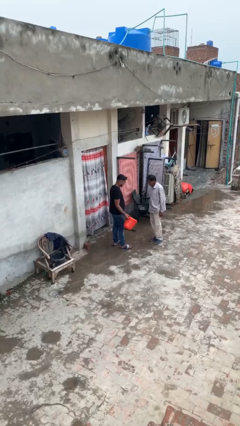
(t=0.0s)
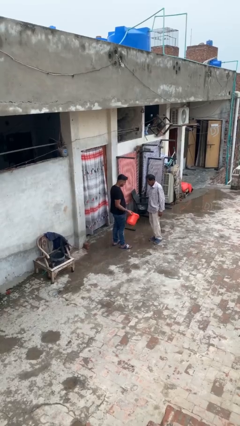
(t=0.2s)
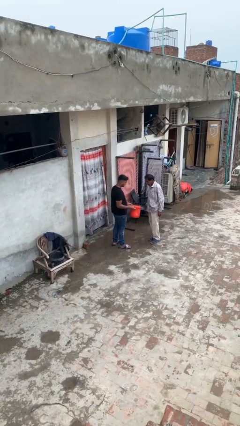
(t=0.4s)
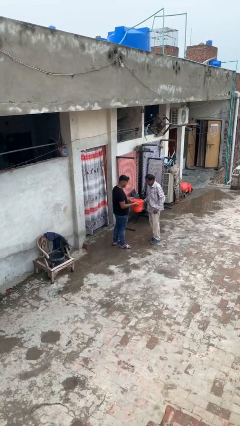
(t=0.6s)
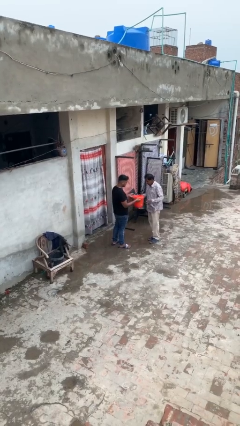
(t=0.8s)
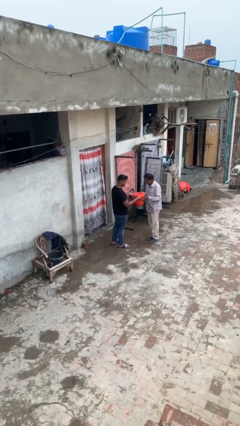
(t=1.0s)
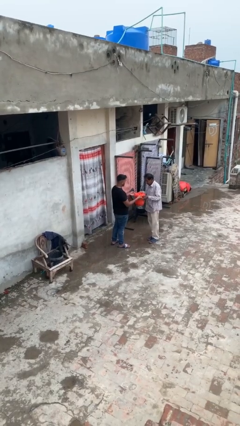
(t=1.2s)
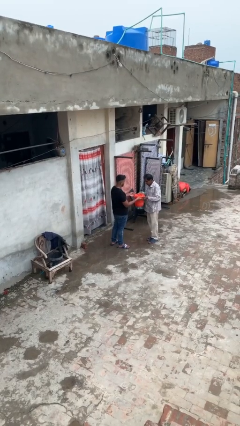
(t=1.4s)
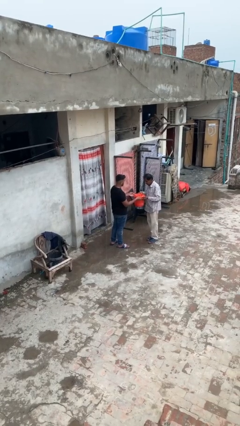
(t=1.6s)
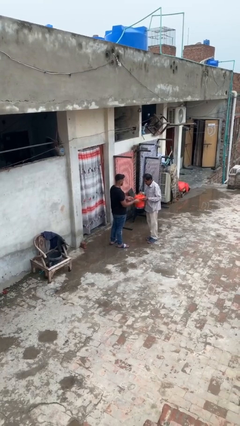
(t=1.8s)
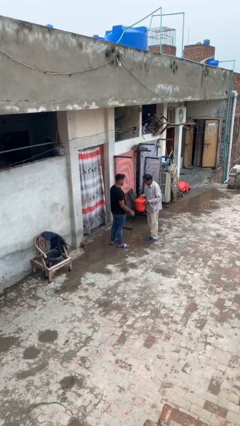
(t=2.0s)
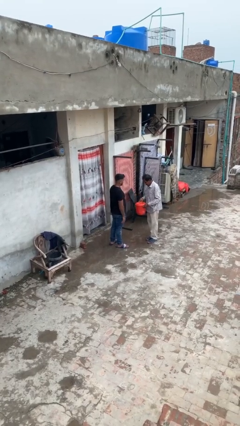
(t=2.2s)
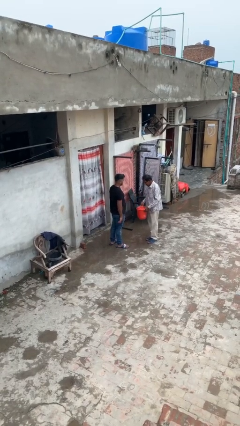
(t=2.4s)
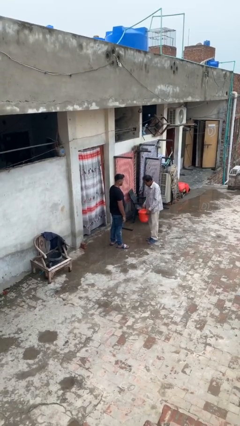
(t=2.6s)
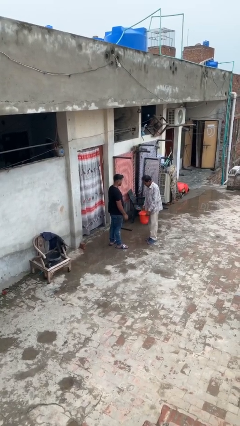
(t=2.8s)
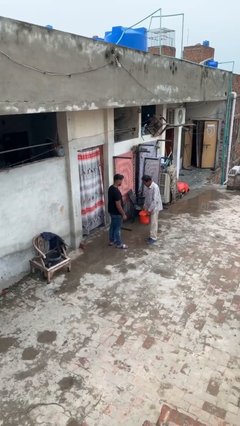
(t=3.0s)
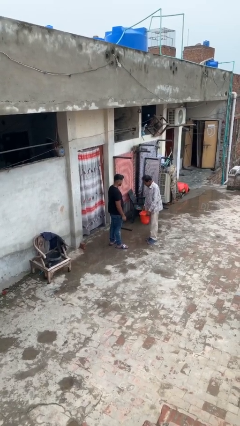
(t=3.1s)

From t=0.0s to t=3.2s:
person transfers object to person

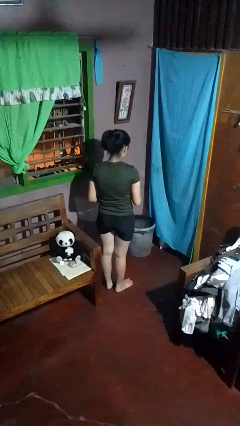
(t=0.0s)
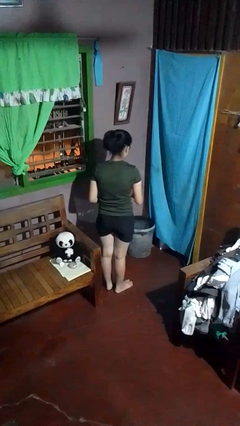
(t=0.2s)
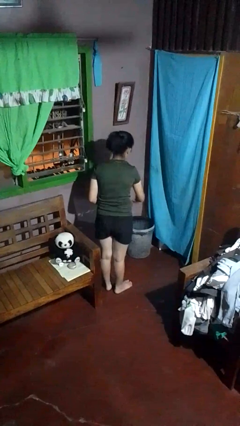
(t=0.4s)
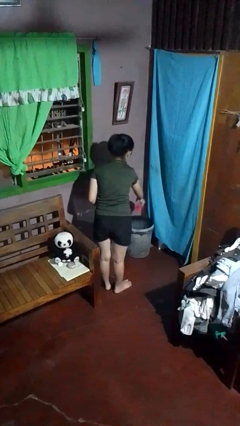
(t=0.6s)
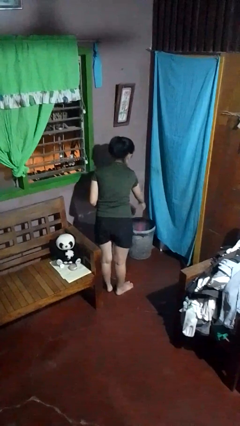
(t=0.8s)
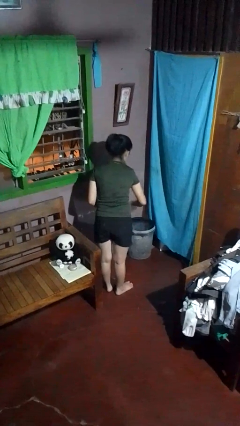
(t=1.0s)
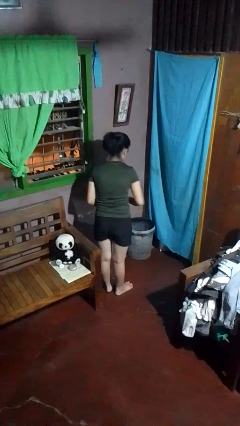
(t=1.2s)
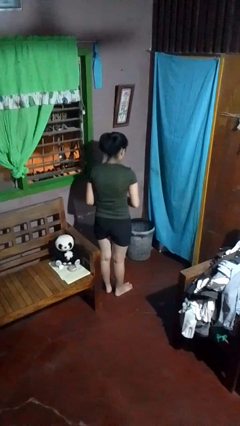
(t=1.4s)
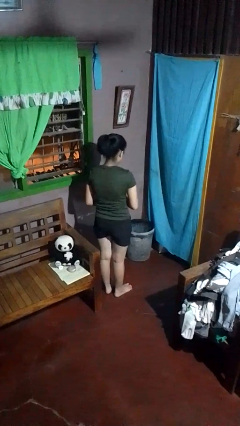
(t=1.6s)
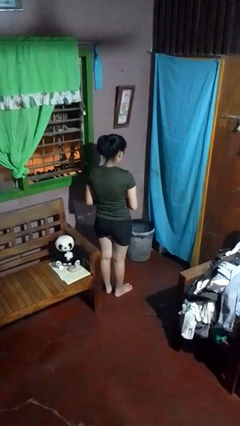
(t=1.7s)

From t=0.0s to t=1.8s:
person discards trash

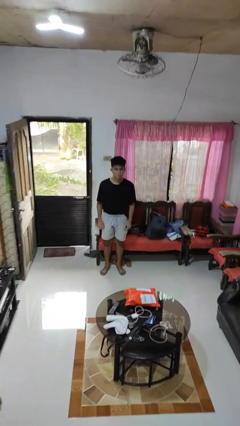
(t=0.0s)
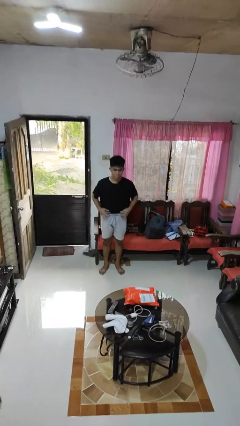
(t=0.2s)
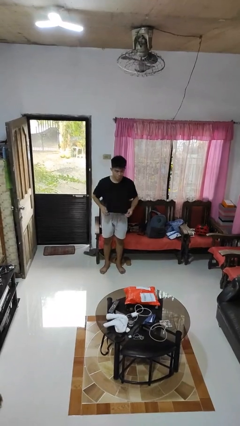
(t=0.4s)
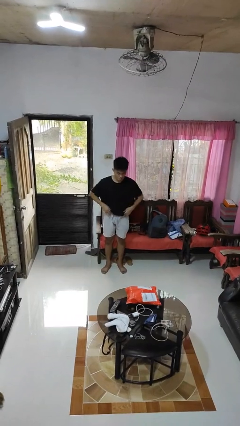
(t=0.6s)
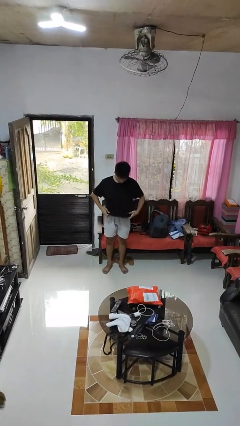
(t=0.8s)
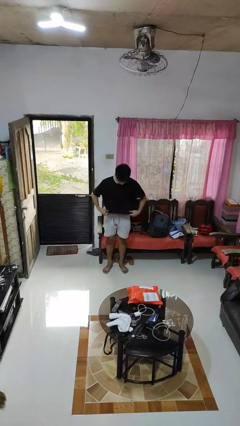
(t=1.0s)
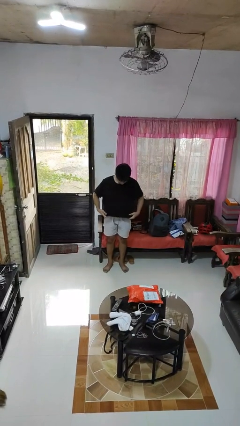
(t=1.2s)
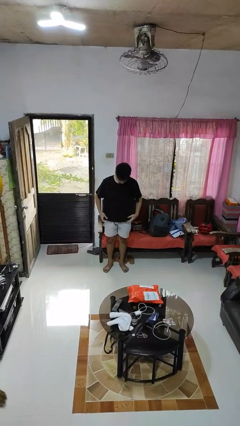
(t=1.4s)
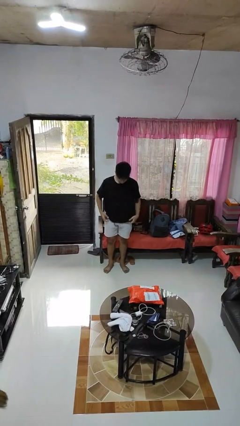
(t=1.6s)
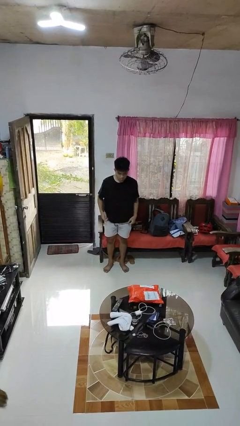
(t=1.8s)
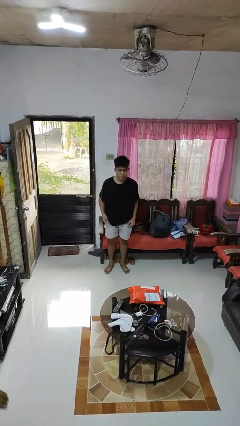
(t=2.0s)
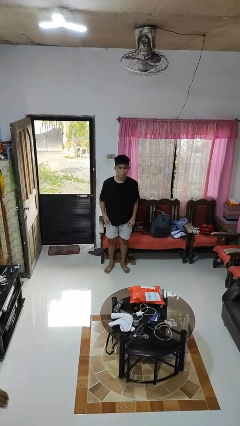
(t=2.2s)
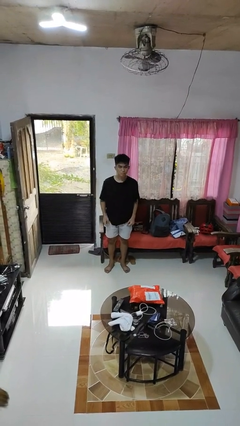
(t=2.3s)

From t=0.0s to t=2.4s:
person untucks shirt

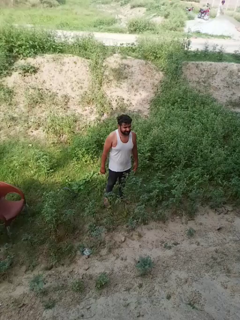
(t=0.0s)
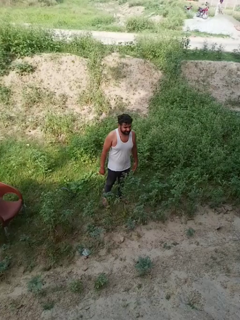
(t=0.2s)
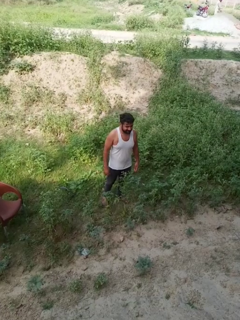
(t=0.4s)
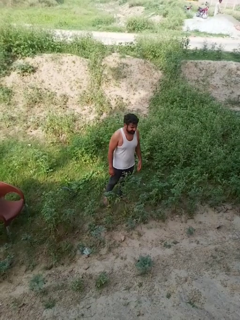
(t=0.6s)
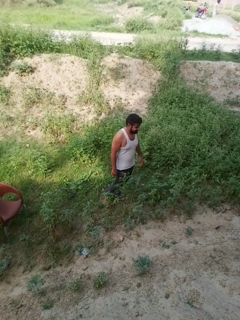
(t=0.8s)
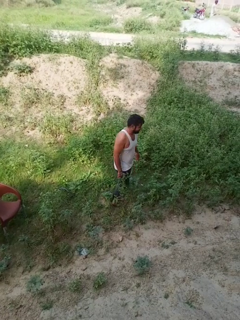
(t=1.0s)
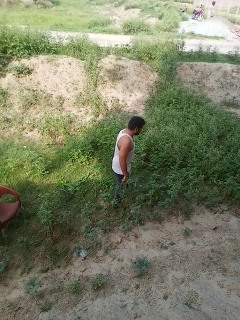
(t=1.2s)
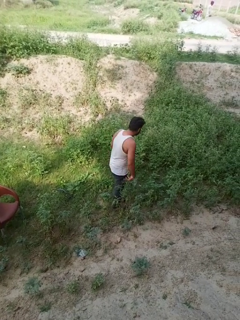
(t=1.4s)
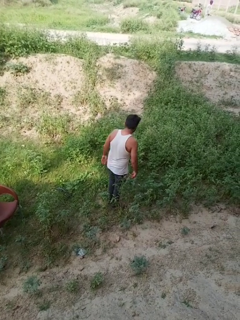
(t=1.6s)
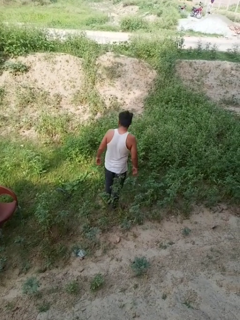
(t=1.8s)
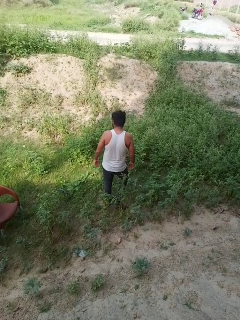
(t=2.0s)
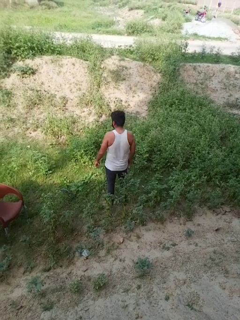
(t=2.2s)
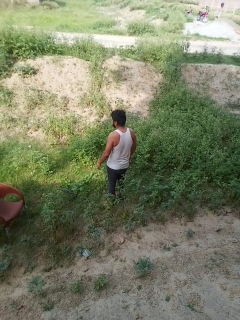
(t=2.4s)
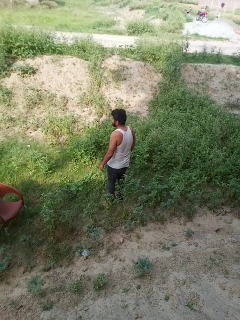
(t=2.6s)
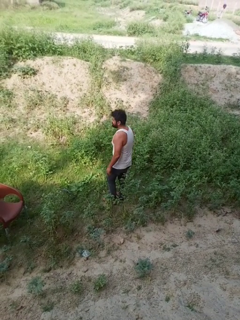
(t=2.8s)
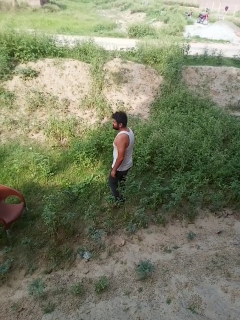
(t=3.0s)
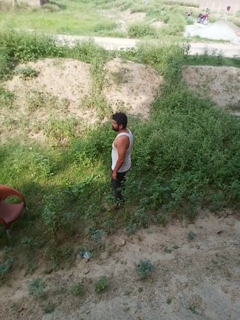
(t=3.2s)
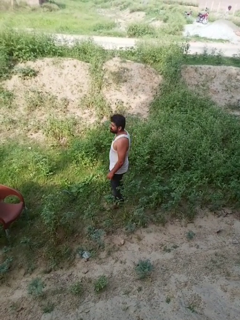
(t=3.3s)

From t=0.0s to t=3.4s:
person twirls

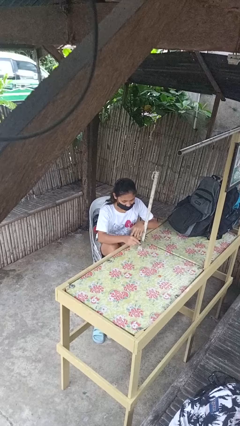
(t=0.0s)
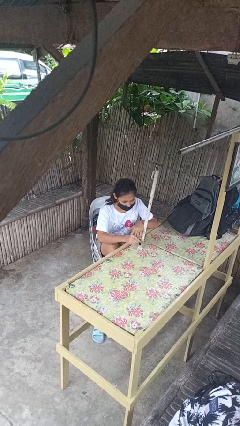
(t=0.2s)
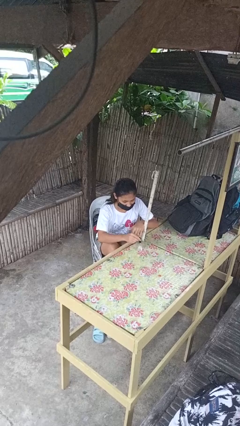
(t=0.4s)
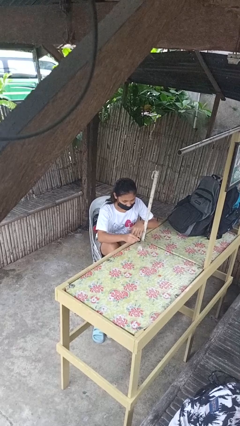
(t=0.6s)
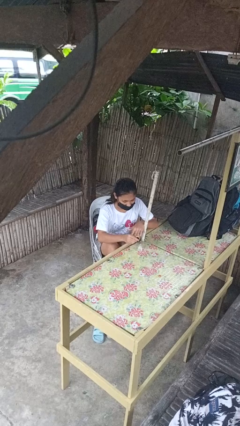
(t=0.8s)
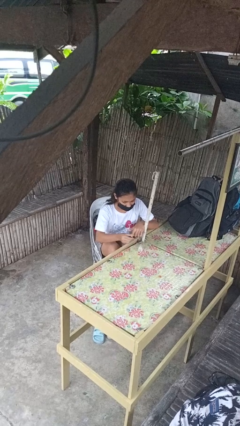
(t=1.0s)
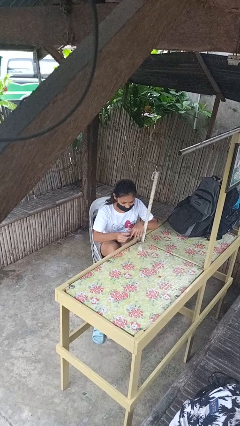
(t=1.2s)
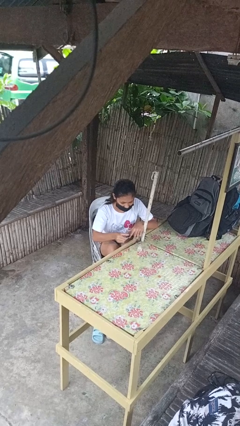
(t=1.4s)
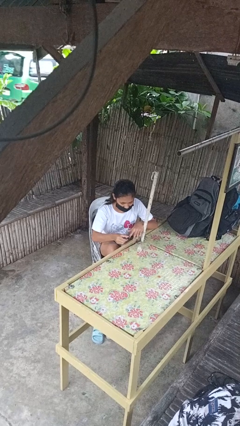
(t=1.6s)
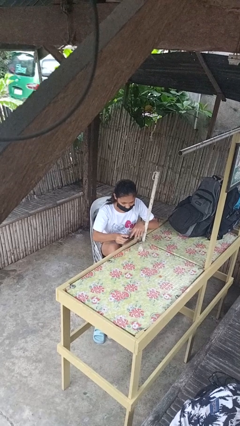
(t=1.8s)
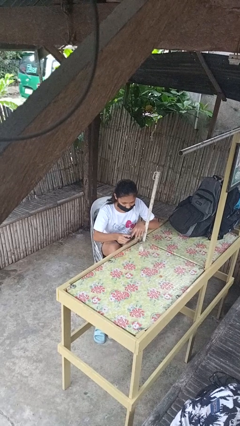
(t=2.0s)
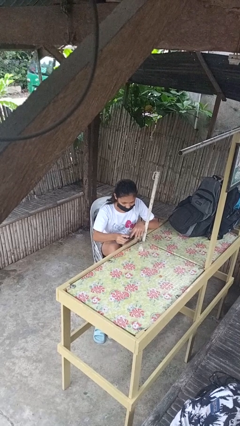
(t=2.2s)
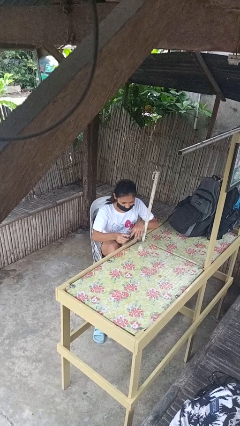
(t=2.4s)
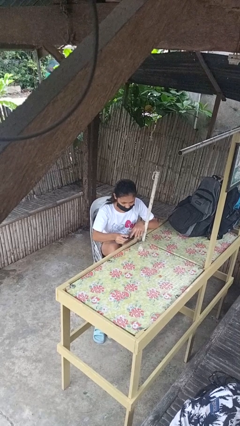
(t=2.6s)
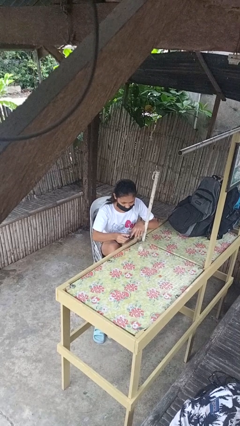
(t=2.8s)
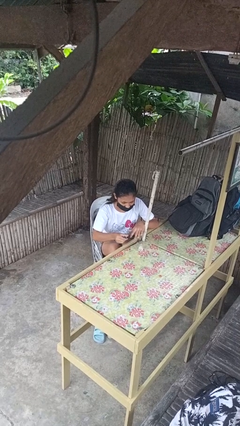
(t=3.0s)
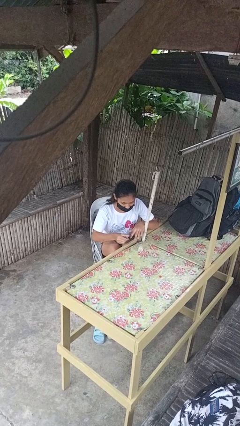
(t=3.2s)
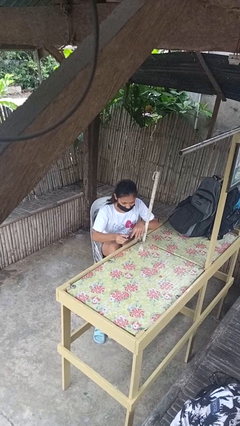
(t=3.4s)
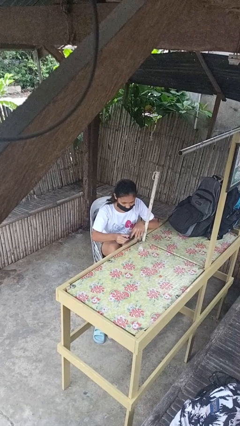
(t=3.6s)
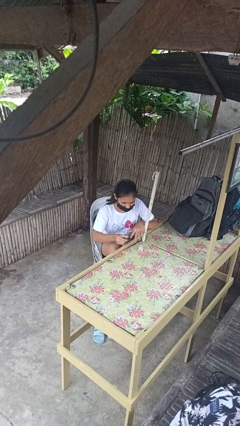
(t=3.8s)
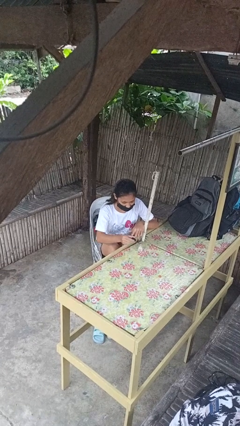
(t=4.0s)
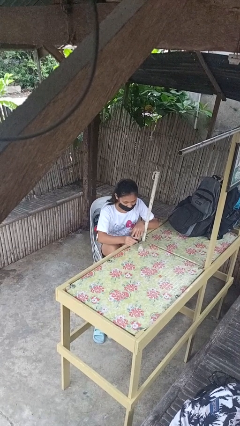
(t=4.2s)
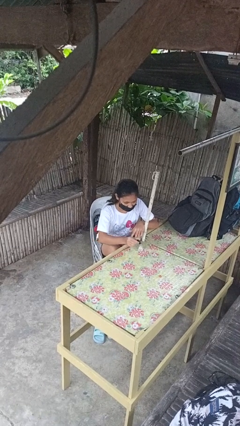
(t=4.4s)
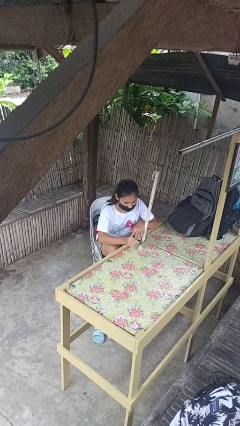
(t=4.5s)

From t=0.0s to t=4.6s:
person paints fingernails

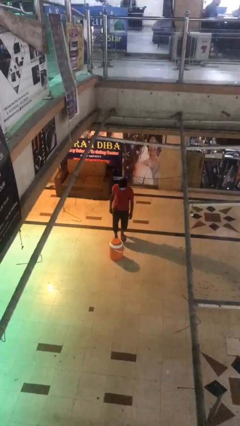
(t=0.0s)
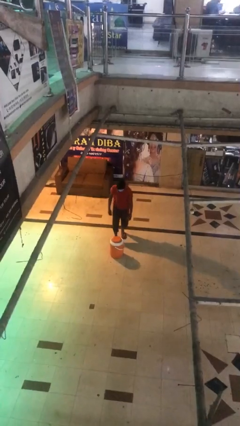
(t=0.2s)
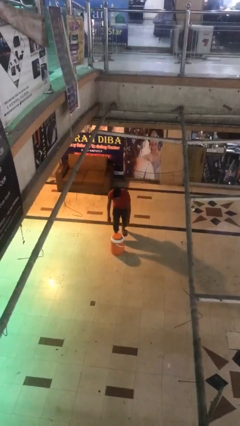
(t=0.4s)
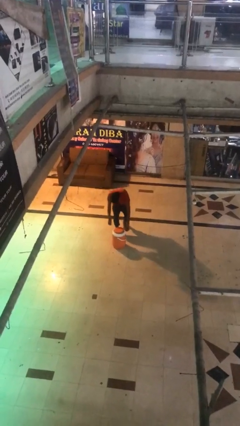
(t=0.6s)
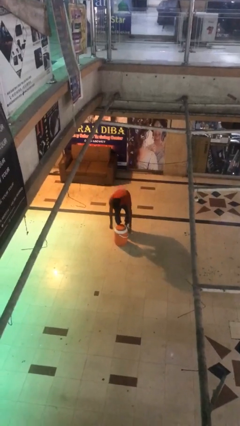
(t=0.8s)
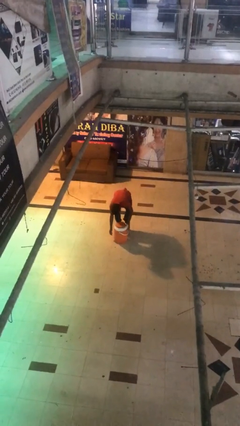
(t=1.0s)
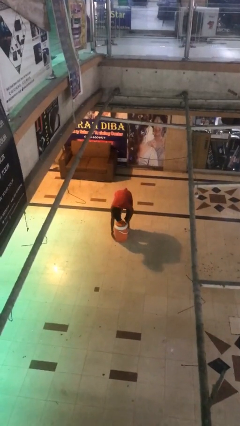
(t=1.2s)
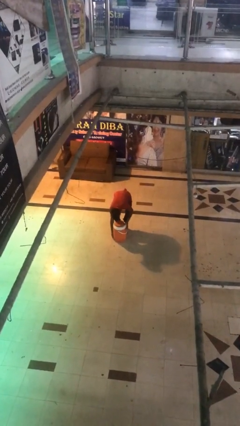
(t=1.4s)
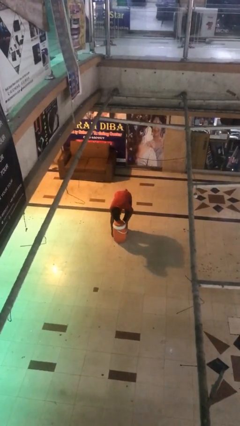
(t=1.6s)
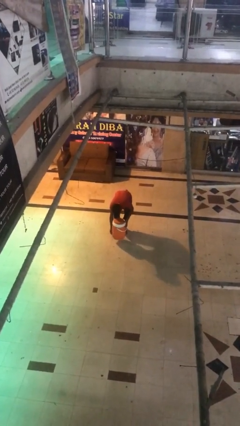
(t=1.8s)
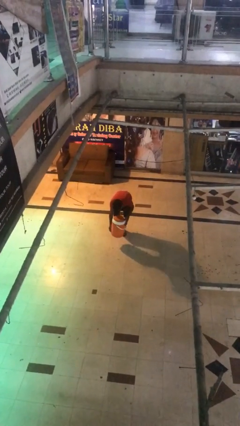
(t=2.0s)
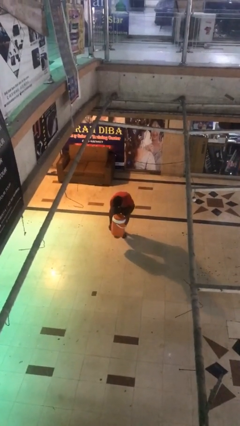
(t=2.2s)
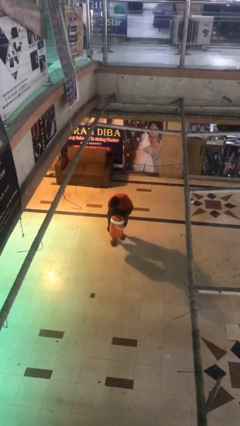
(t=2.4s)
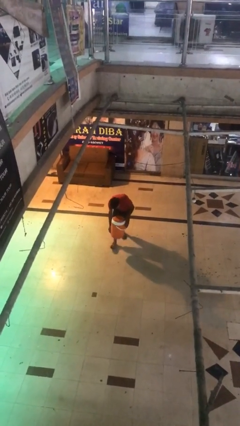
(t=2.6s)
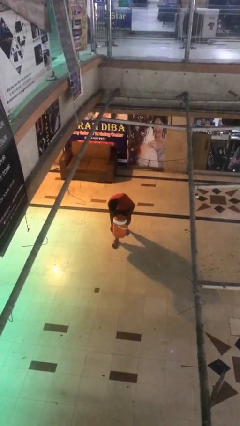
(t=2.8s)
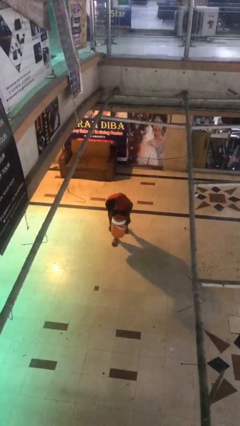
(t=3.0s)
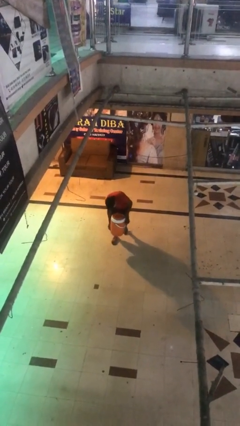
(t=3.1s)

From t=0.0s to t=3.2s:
person picks up object from floor
